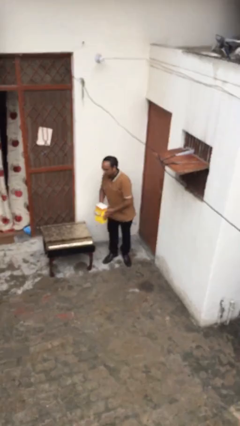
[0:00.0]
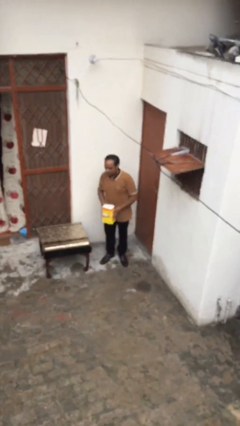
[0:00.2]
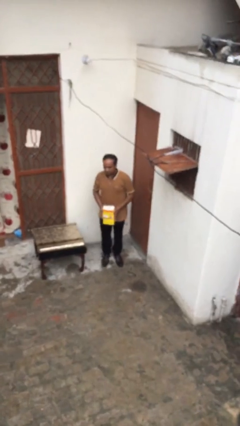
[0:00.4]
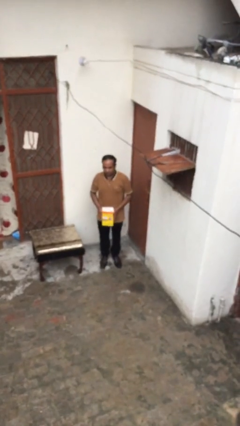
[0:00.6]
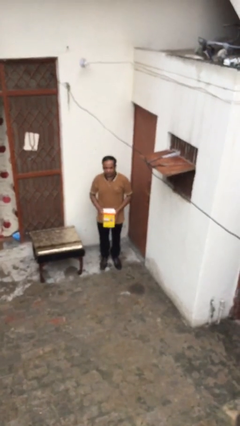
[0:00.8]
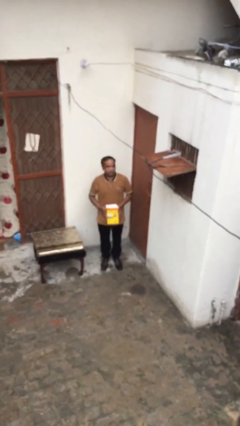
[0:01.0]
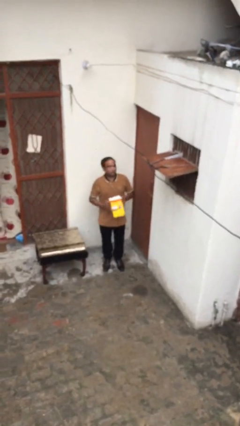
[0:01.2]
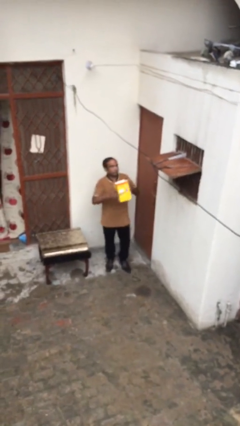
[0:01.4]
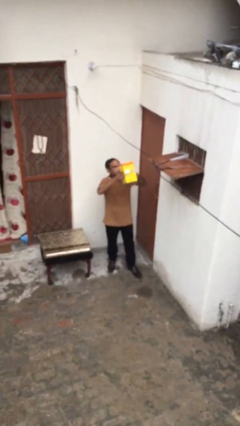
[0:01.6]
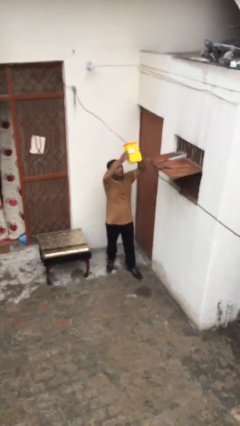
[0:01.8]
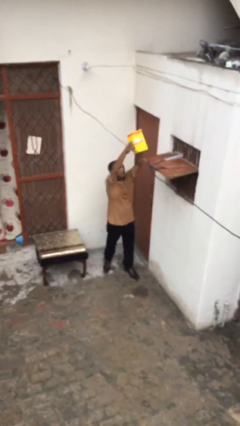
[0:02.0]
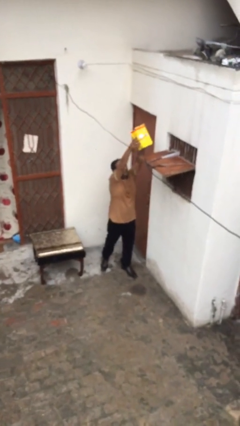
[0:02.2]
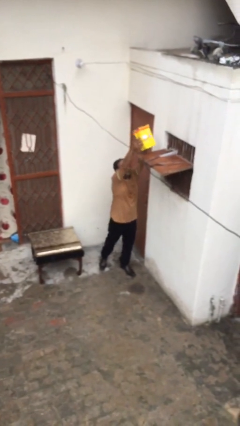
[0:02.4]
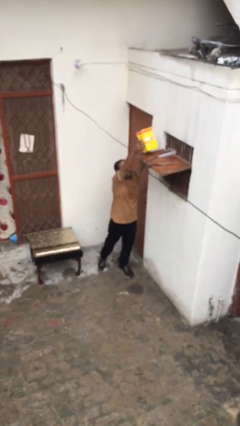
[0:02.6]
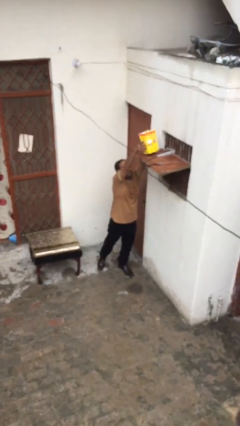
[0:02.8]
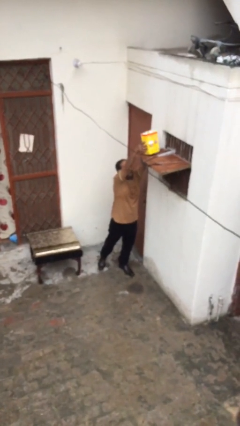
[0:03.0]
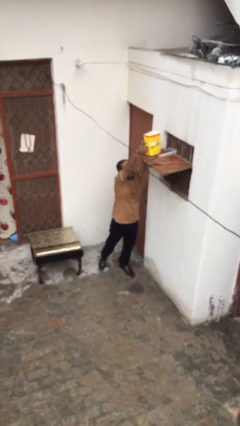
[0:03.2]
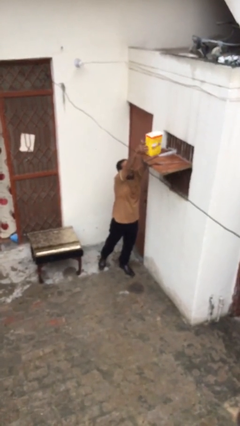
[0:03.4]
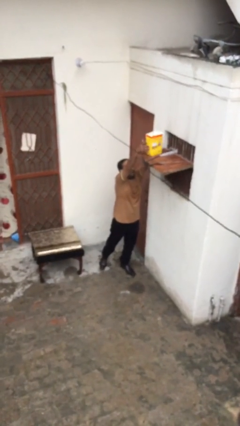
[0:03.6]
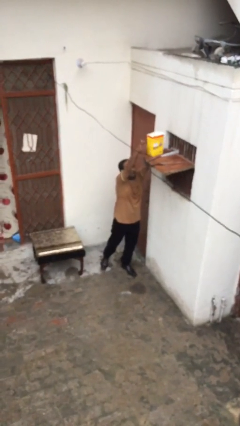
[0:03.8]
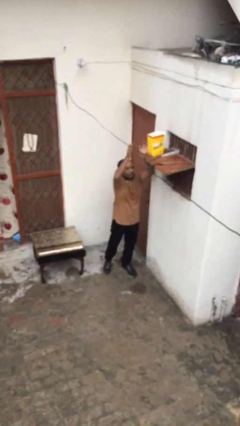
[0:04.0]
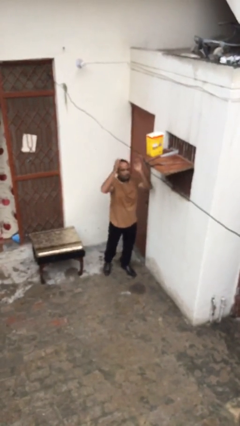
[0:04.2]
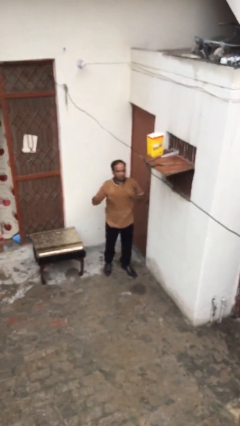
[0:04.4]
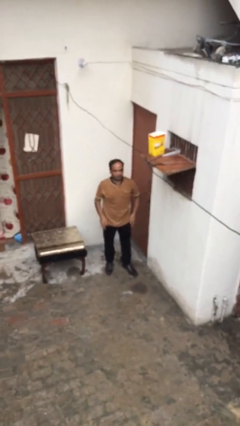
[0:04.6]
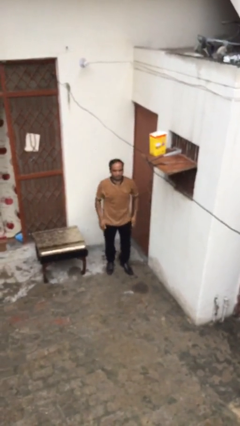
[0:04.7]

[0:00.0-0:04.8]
person puts down object on shelf

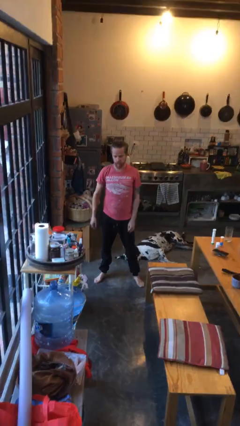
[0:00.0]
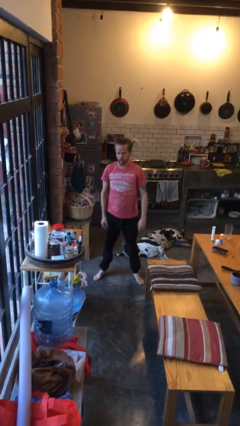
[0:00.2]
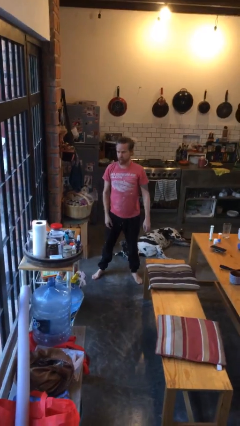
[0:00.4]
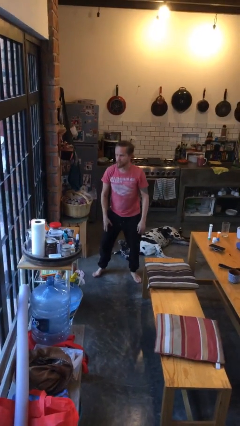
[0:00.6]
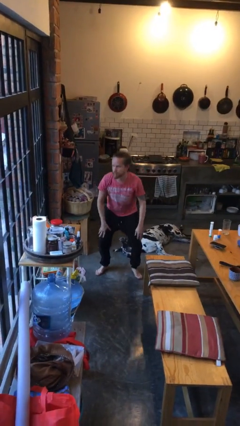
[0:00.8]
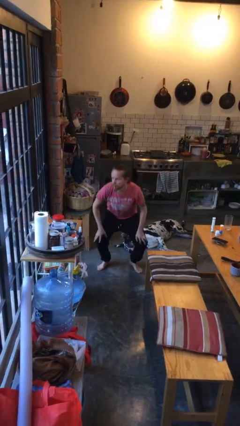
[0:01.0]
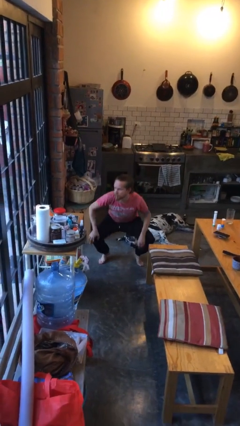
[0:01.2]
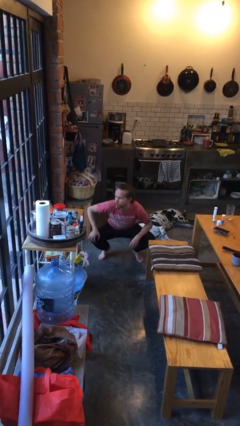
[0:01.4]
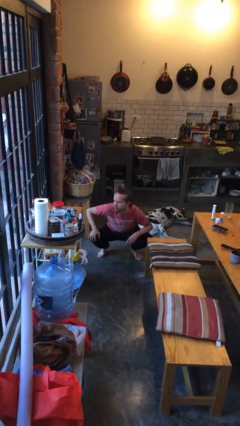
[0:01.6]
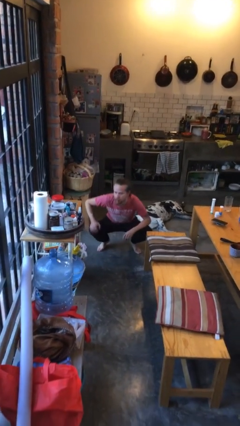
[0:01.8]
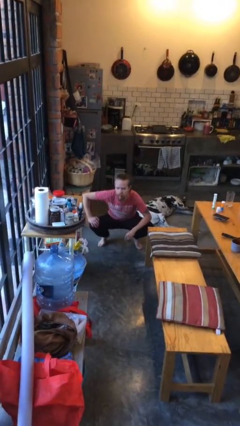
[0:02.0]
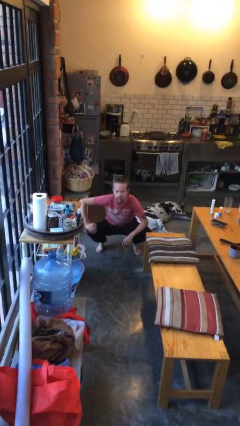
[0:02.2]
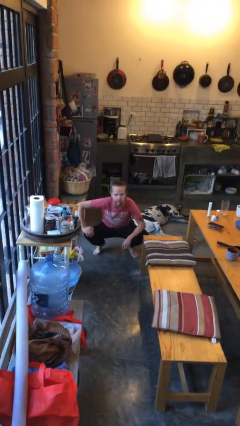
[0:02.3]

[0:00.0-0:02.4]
person squats

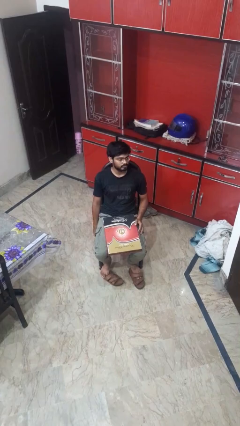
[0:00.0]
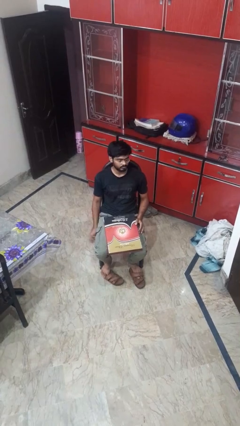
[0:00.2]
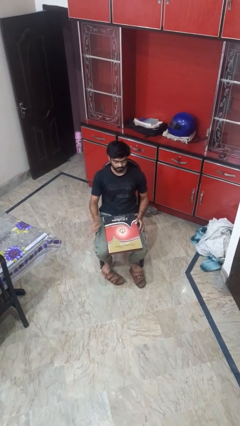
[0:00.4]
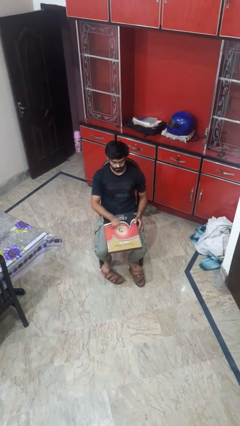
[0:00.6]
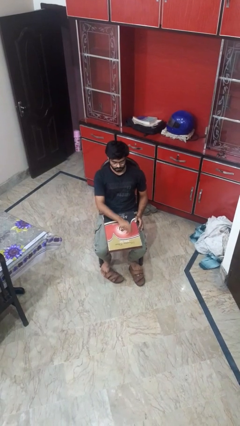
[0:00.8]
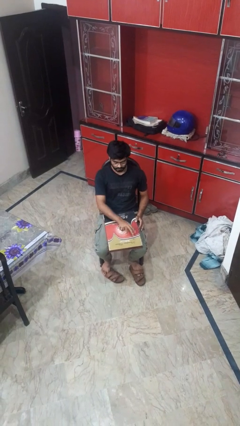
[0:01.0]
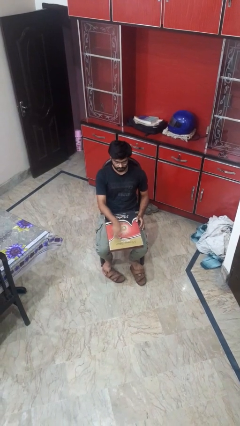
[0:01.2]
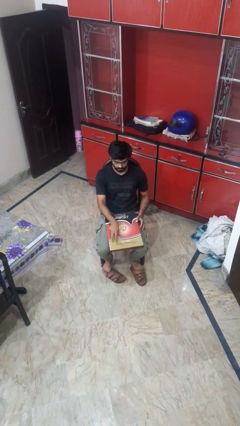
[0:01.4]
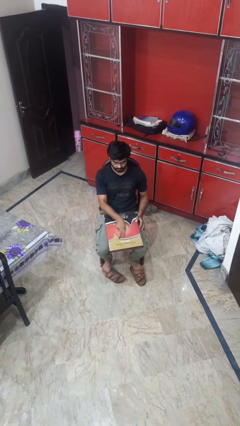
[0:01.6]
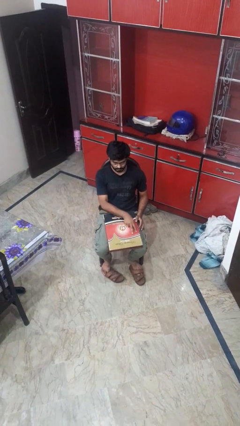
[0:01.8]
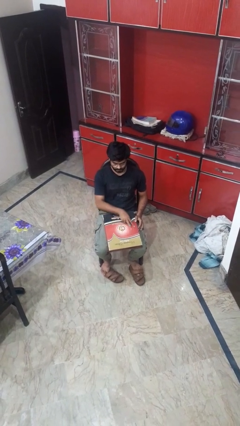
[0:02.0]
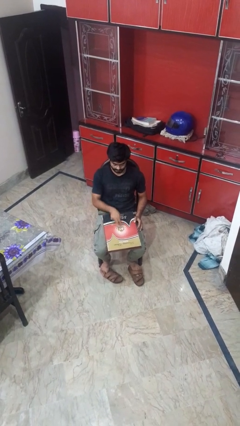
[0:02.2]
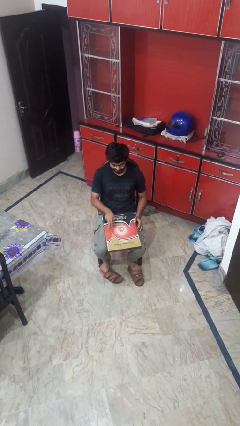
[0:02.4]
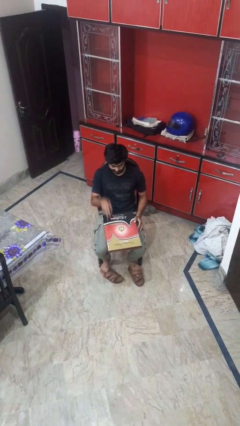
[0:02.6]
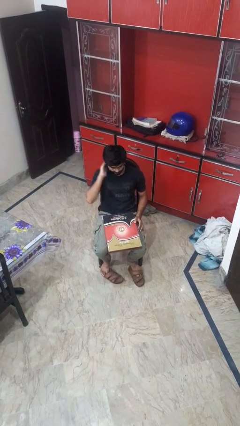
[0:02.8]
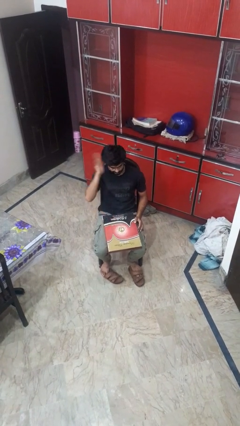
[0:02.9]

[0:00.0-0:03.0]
person taps object with finger

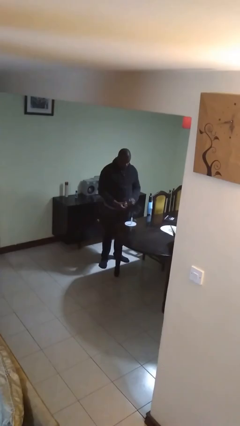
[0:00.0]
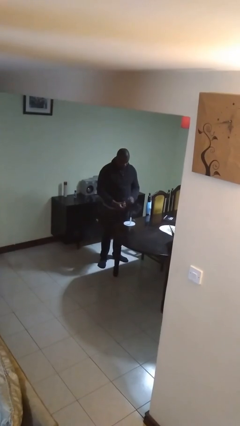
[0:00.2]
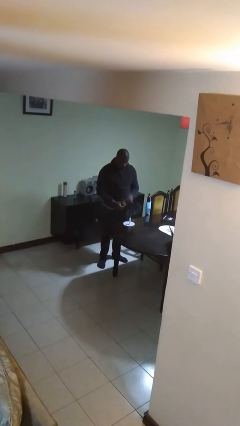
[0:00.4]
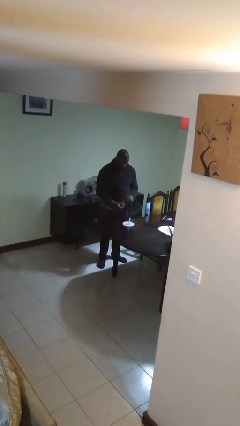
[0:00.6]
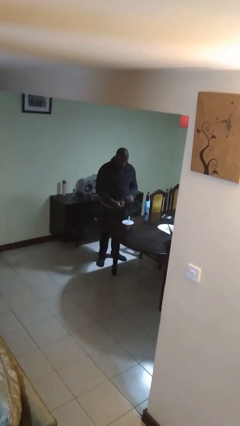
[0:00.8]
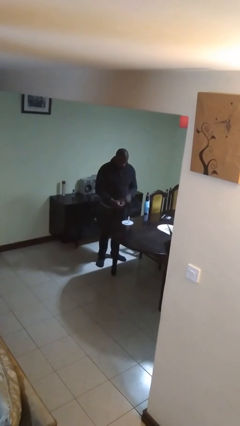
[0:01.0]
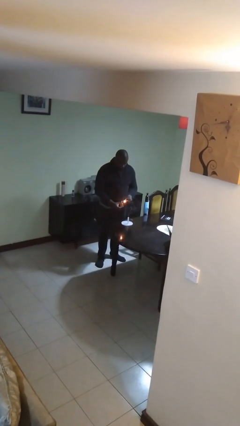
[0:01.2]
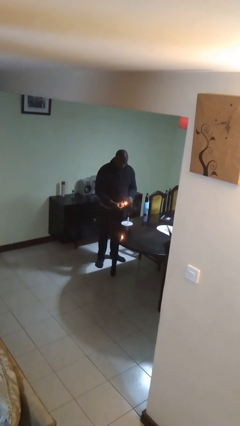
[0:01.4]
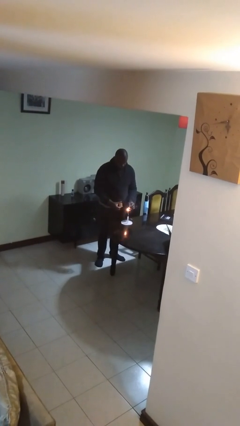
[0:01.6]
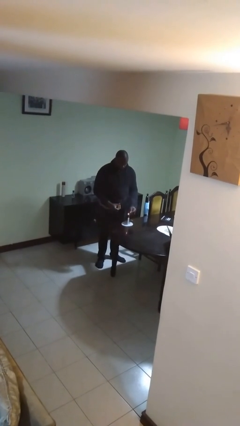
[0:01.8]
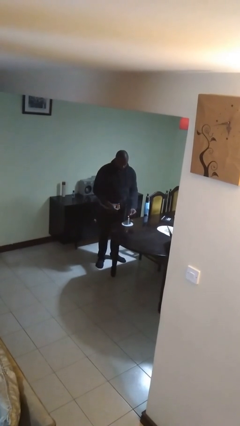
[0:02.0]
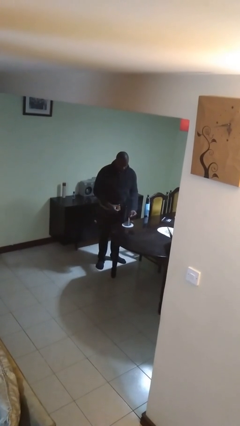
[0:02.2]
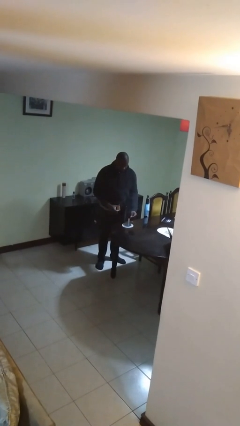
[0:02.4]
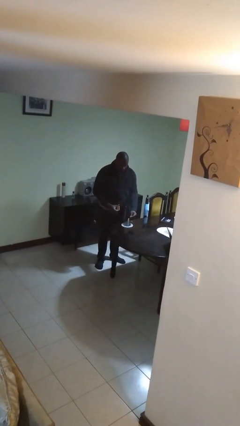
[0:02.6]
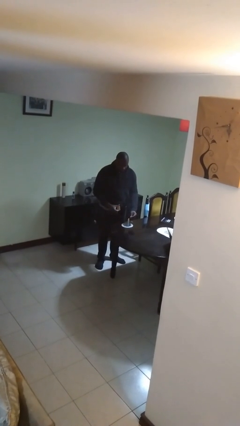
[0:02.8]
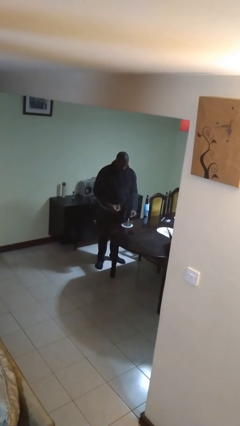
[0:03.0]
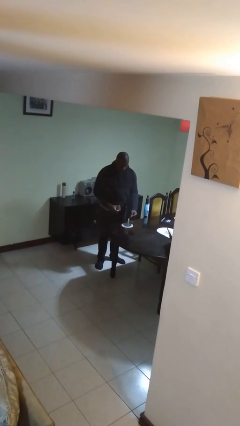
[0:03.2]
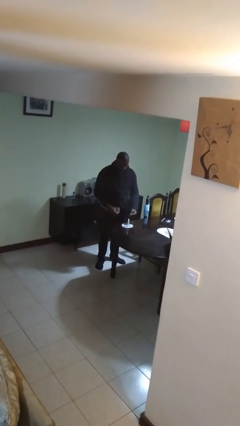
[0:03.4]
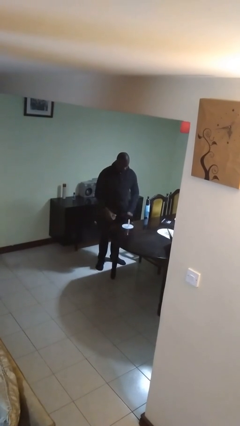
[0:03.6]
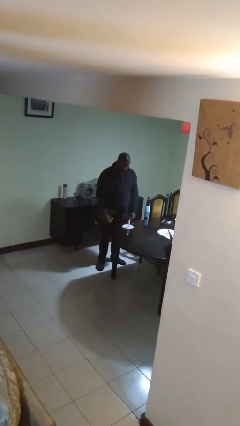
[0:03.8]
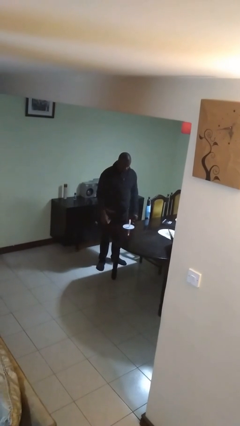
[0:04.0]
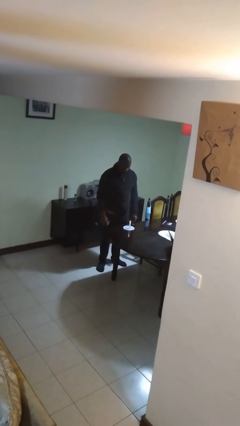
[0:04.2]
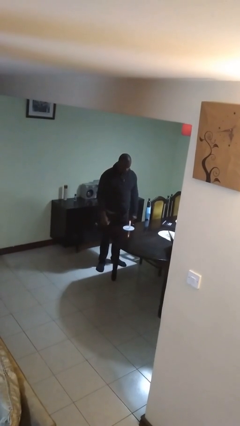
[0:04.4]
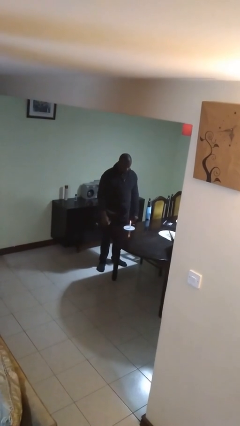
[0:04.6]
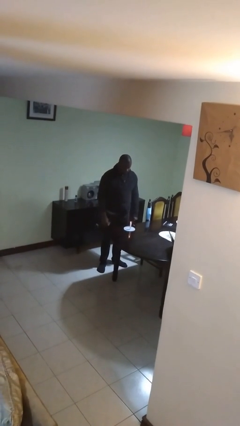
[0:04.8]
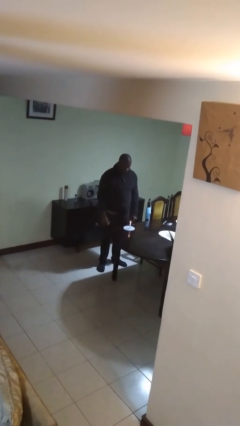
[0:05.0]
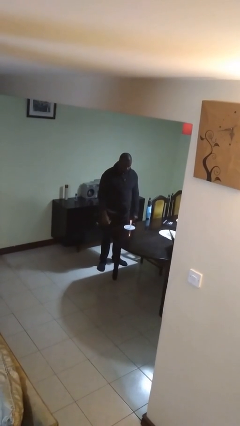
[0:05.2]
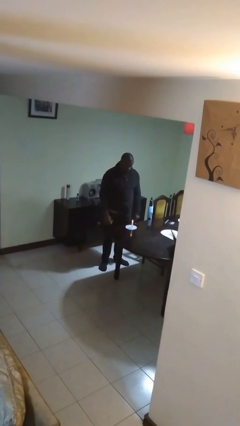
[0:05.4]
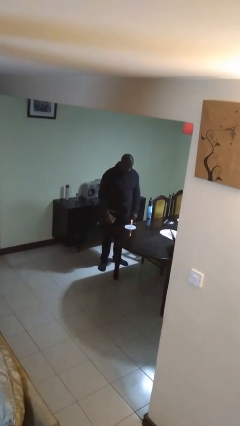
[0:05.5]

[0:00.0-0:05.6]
person lights candle

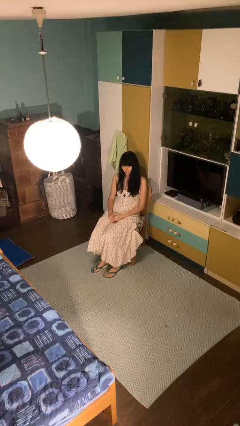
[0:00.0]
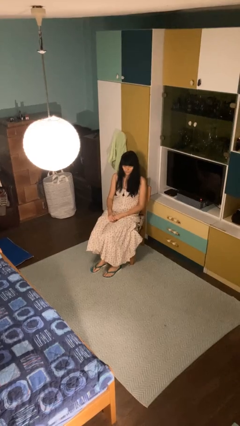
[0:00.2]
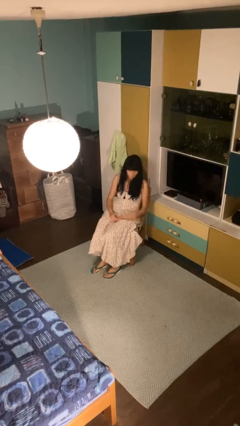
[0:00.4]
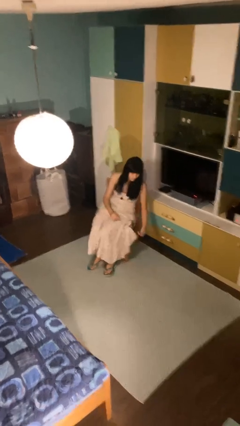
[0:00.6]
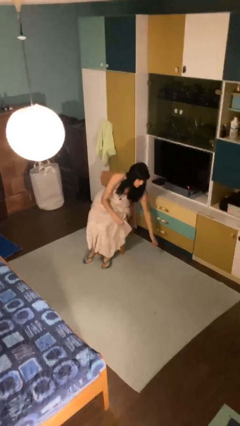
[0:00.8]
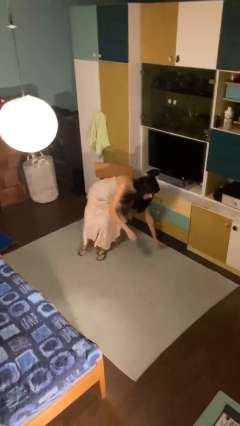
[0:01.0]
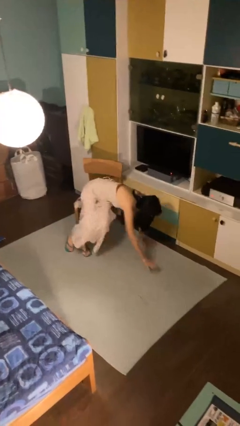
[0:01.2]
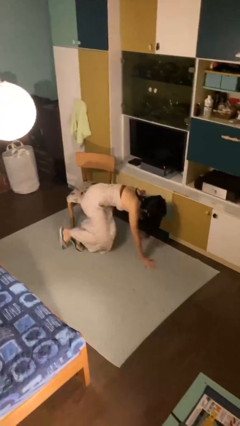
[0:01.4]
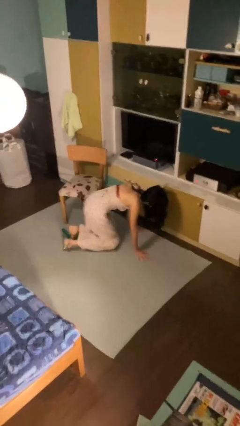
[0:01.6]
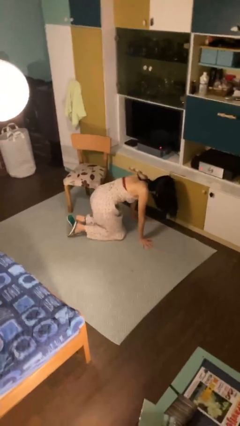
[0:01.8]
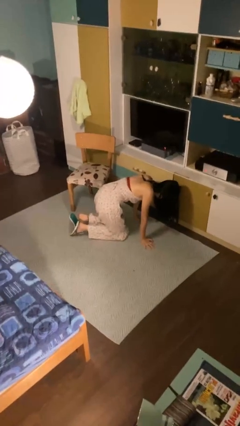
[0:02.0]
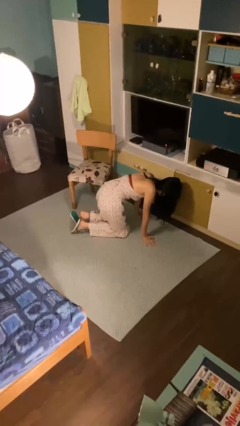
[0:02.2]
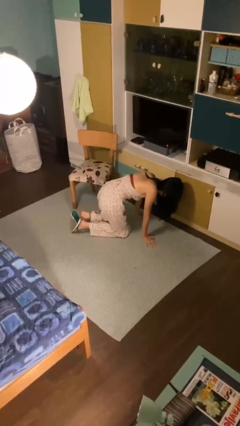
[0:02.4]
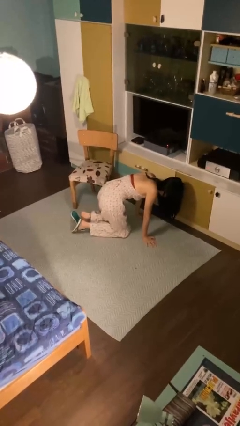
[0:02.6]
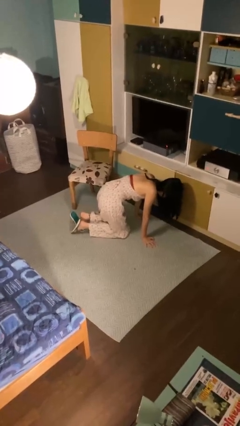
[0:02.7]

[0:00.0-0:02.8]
person falls from chair
